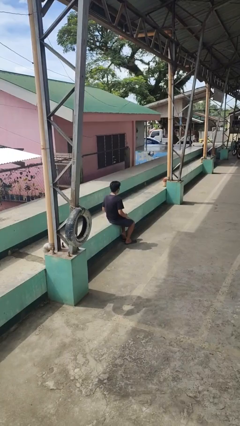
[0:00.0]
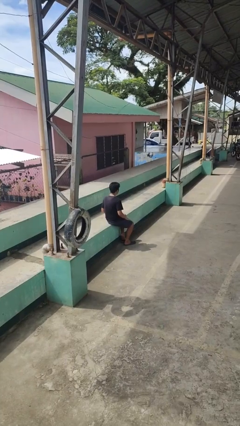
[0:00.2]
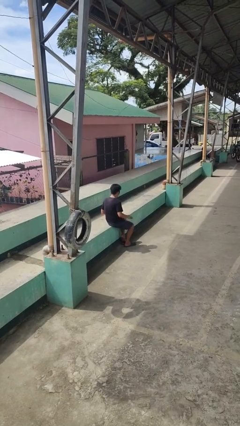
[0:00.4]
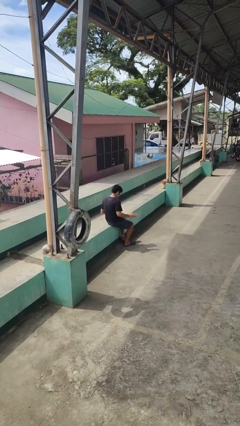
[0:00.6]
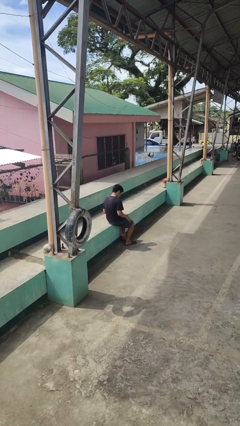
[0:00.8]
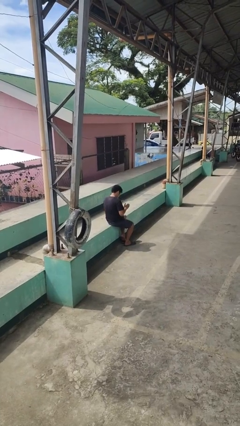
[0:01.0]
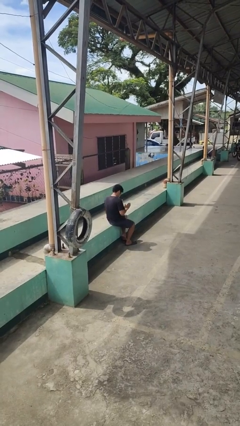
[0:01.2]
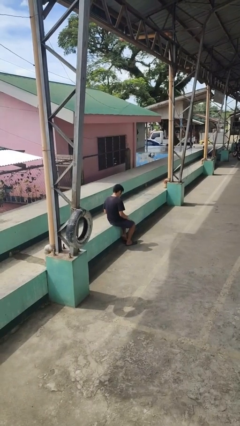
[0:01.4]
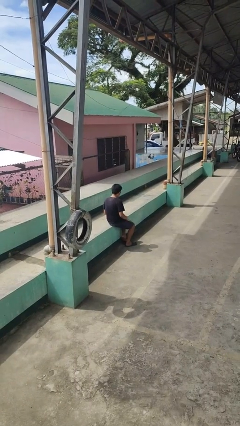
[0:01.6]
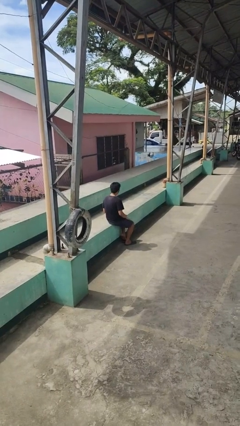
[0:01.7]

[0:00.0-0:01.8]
person slaps hands on thighs

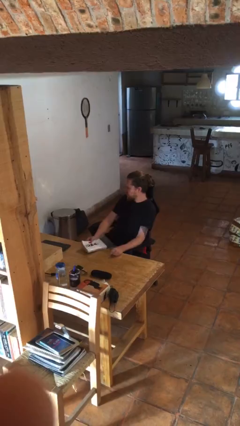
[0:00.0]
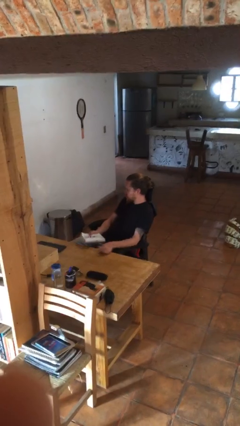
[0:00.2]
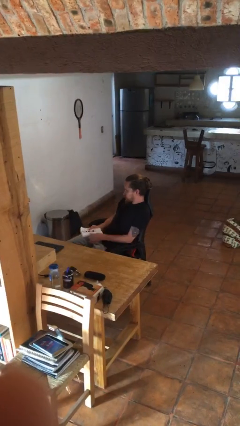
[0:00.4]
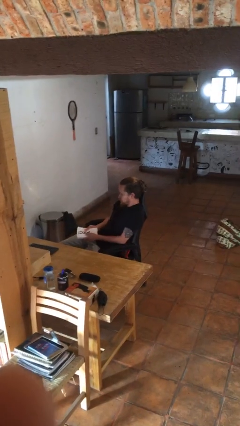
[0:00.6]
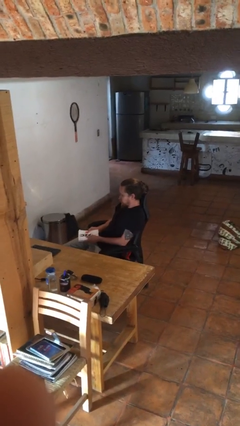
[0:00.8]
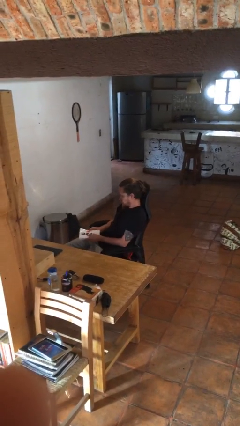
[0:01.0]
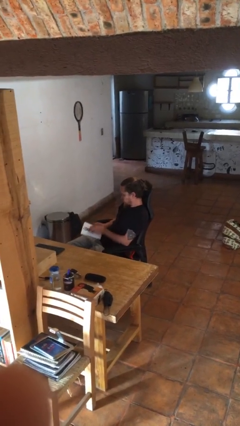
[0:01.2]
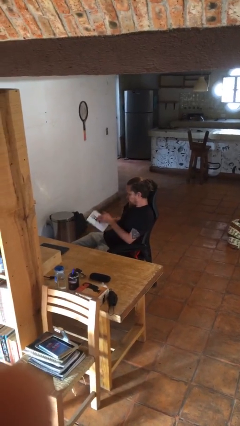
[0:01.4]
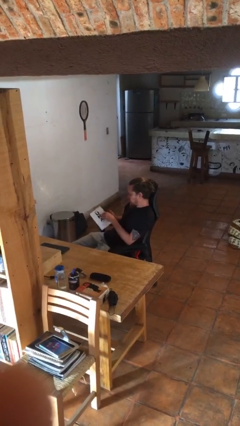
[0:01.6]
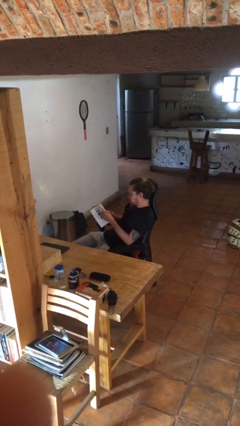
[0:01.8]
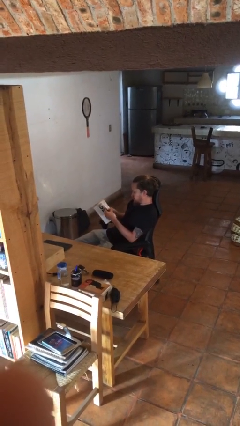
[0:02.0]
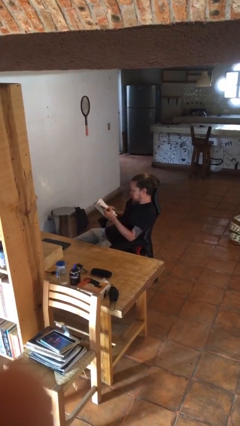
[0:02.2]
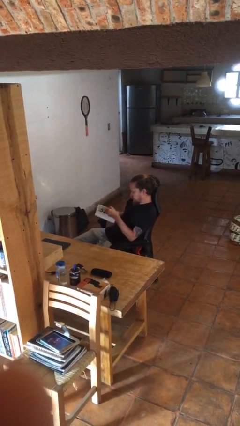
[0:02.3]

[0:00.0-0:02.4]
person reads book

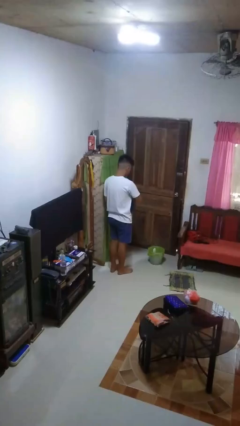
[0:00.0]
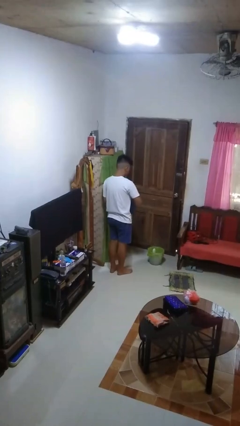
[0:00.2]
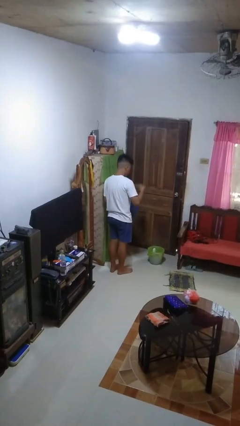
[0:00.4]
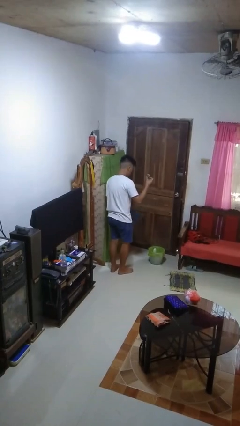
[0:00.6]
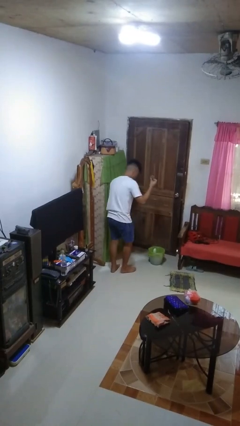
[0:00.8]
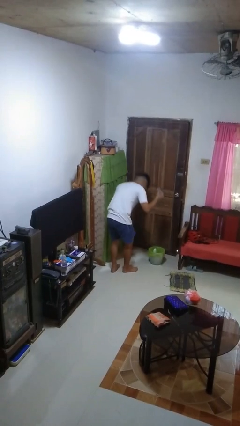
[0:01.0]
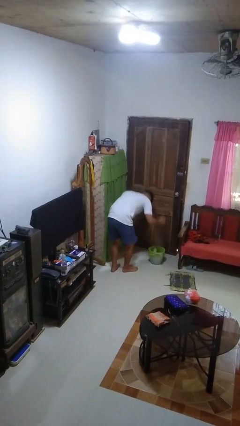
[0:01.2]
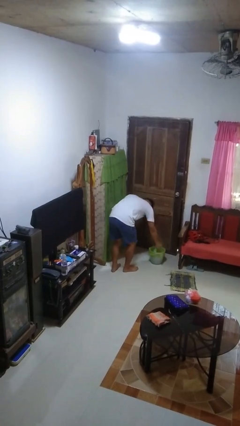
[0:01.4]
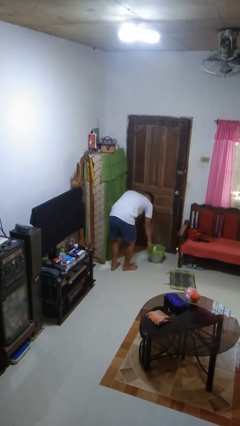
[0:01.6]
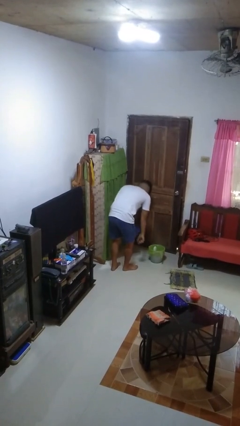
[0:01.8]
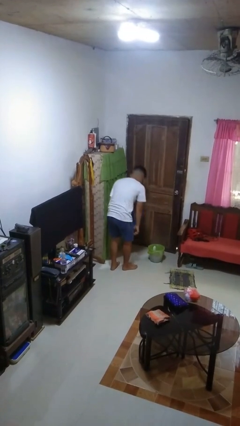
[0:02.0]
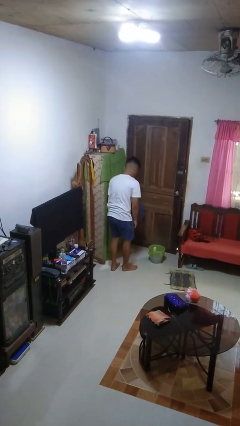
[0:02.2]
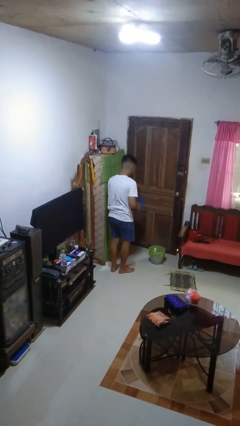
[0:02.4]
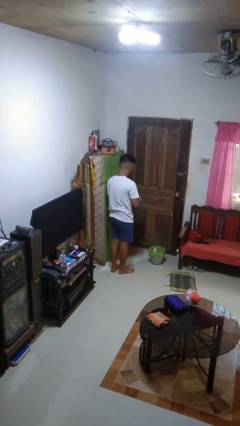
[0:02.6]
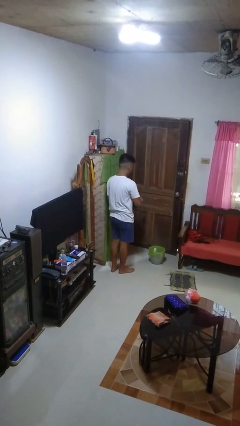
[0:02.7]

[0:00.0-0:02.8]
person discards trash

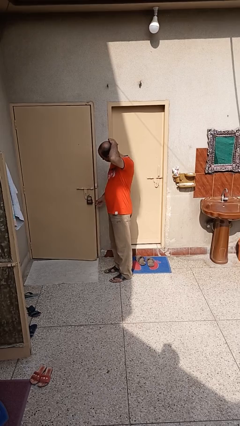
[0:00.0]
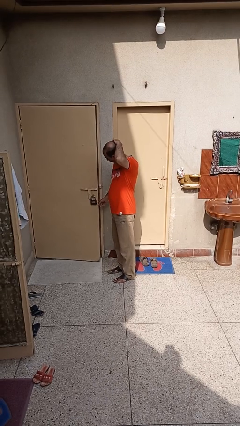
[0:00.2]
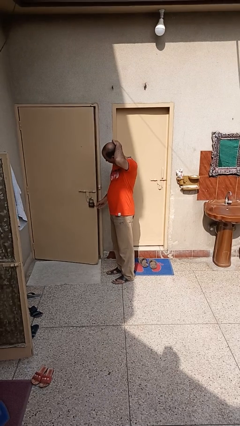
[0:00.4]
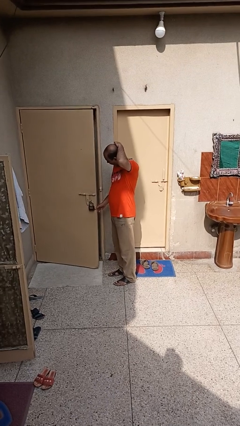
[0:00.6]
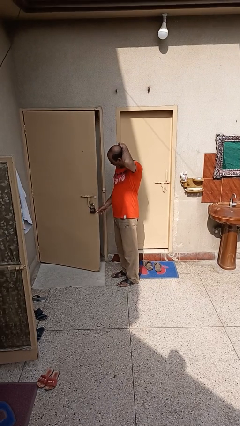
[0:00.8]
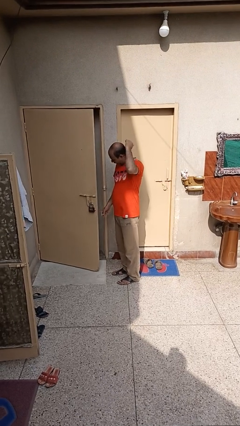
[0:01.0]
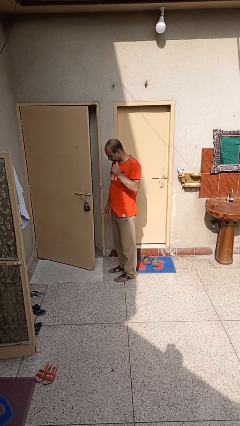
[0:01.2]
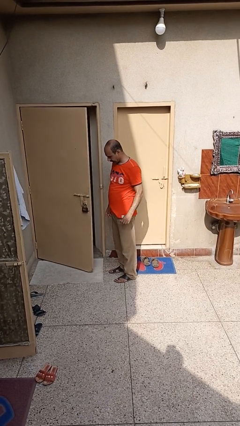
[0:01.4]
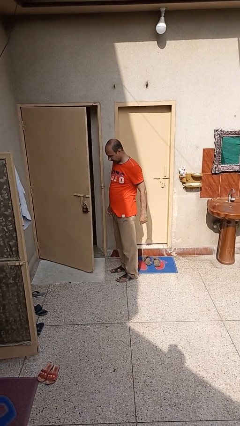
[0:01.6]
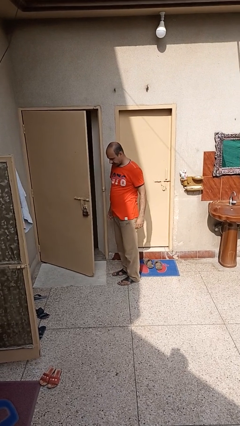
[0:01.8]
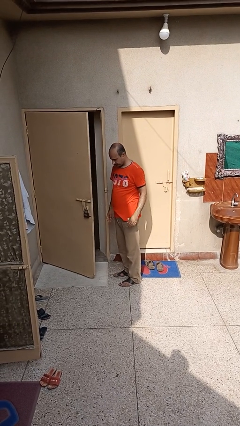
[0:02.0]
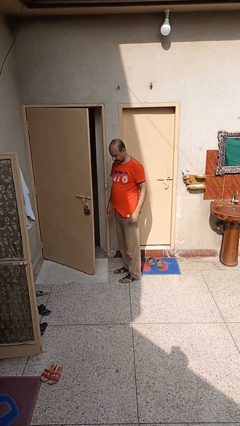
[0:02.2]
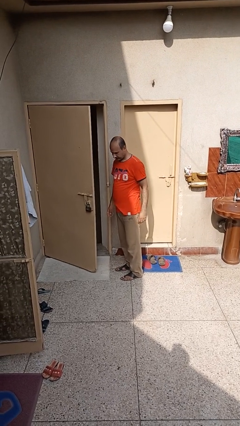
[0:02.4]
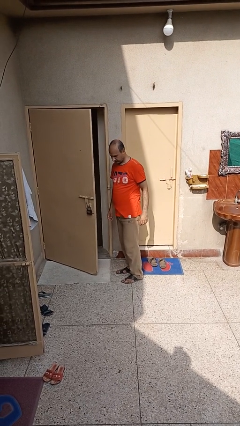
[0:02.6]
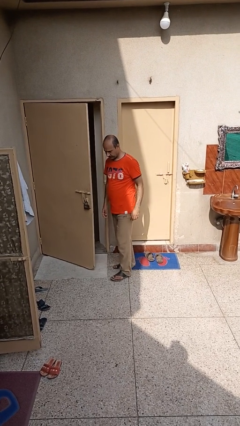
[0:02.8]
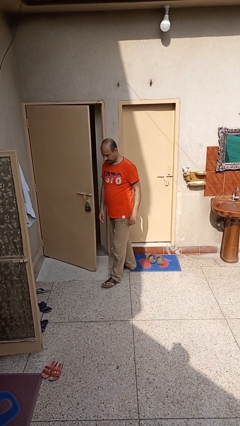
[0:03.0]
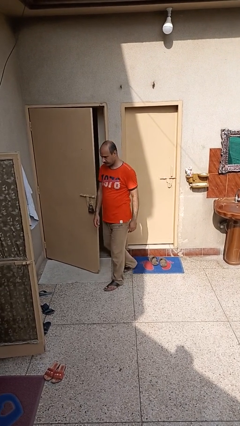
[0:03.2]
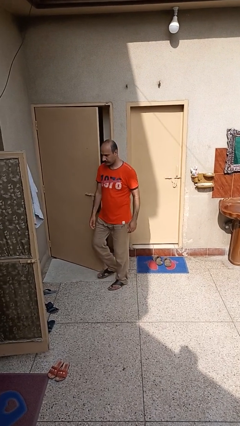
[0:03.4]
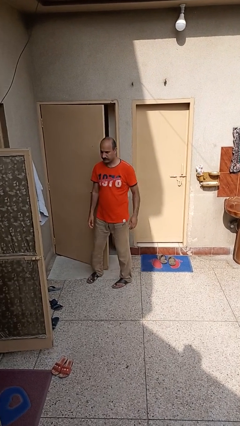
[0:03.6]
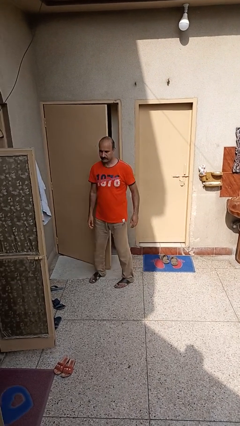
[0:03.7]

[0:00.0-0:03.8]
person opens facility door

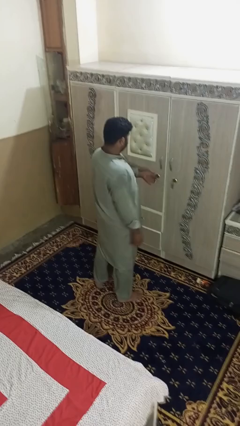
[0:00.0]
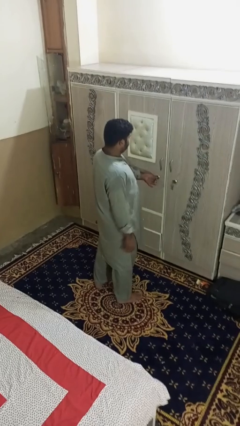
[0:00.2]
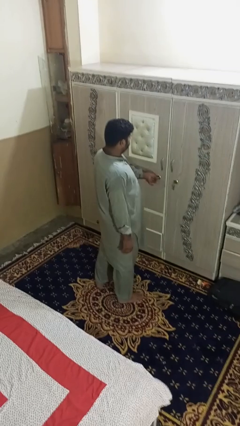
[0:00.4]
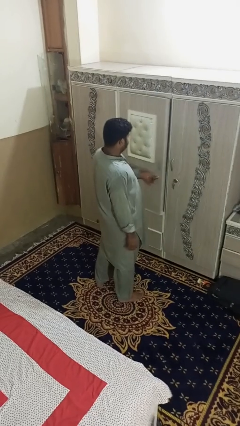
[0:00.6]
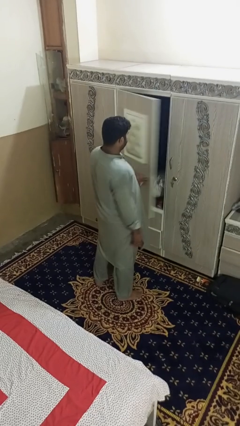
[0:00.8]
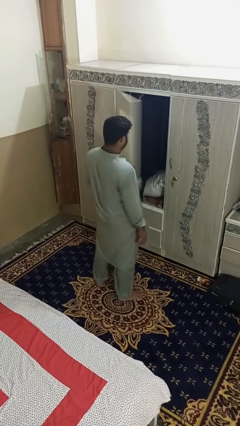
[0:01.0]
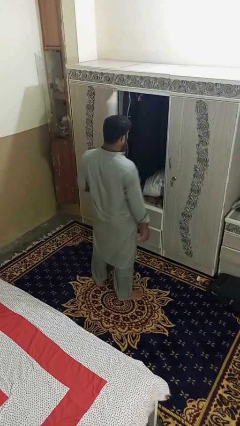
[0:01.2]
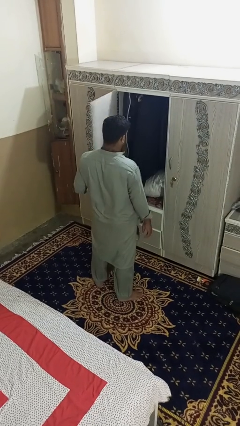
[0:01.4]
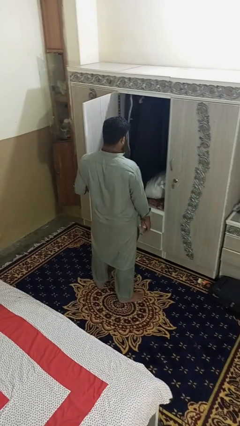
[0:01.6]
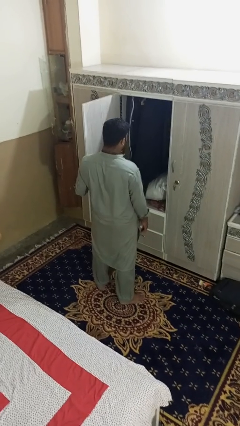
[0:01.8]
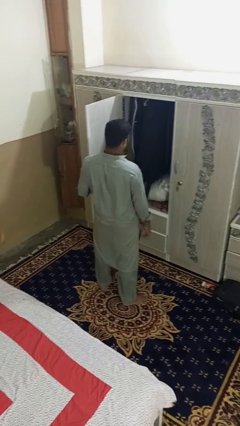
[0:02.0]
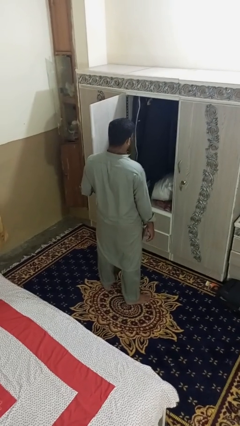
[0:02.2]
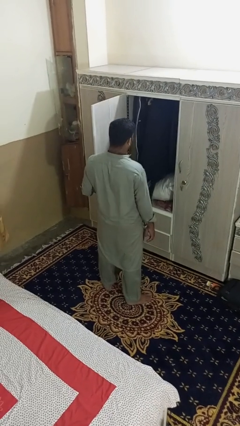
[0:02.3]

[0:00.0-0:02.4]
person opens dresser drawer

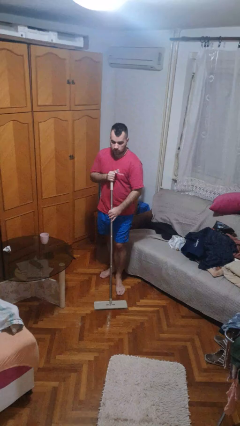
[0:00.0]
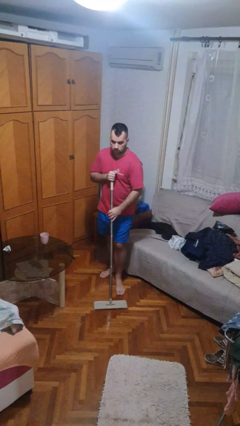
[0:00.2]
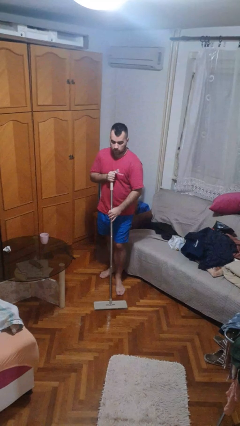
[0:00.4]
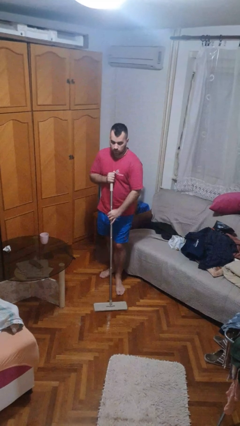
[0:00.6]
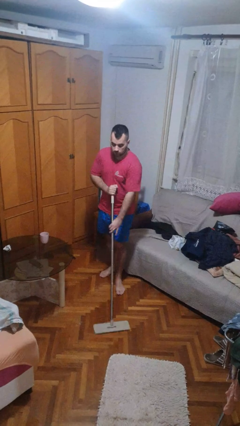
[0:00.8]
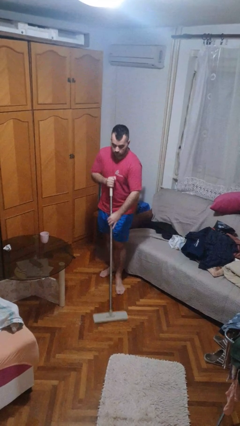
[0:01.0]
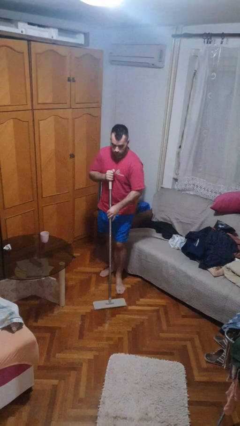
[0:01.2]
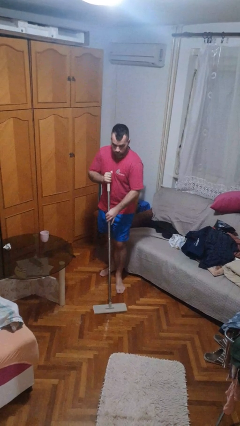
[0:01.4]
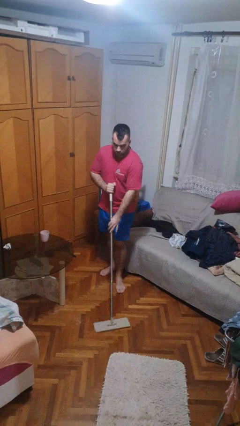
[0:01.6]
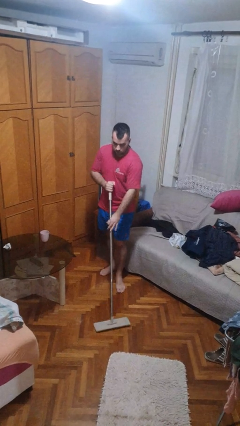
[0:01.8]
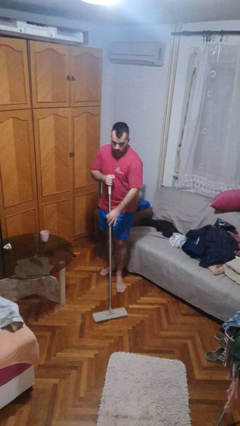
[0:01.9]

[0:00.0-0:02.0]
person mops

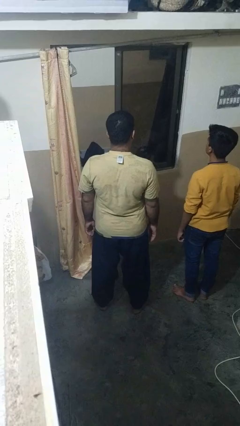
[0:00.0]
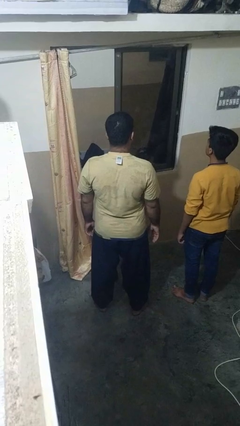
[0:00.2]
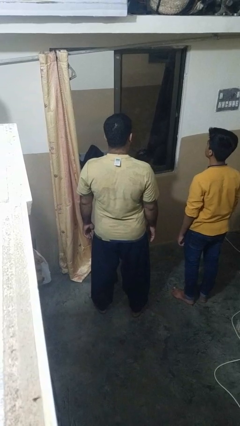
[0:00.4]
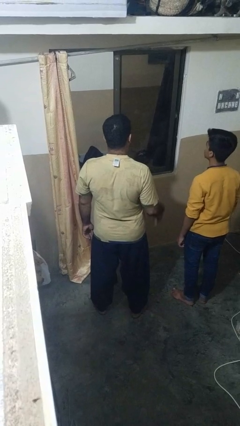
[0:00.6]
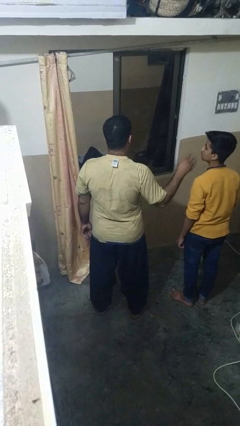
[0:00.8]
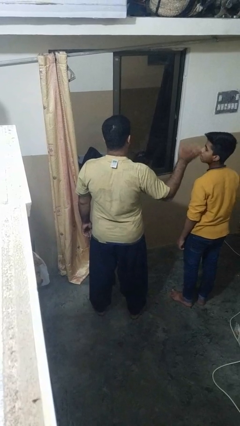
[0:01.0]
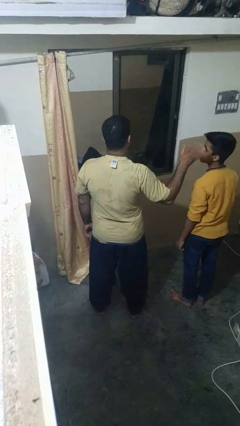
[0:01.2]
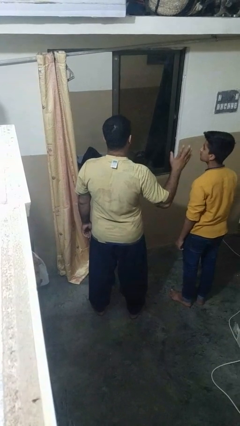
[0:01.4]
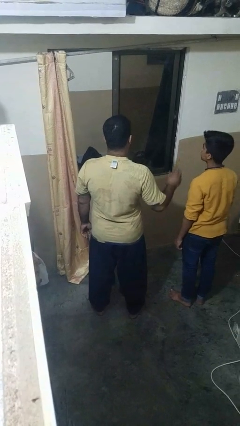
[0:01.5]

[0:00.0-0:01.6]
person waves at person

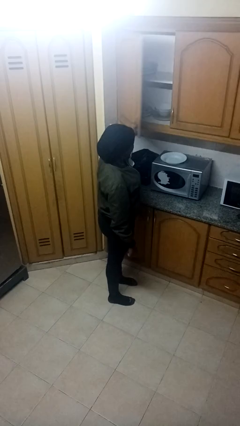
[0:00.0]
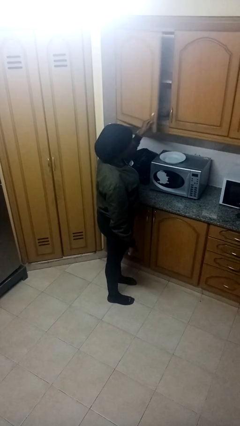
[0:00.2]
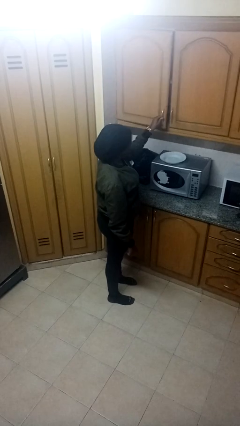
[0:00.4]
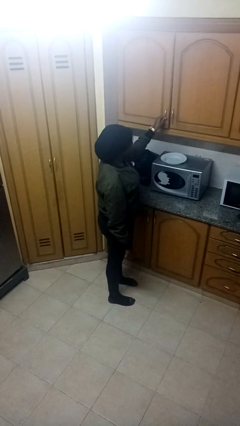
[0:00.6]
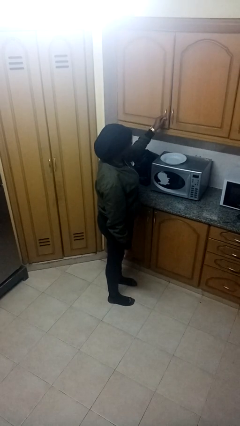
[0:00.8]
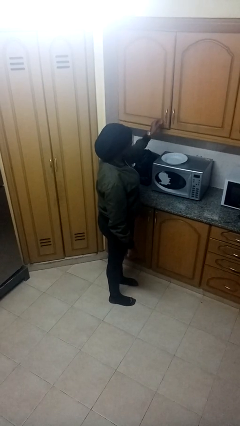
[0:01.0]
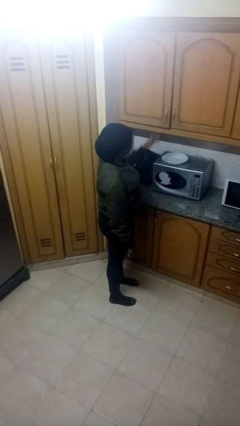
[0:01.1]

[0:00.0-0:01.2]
person closes cabinet